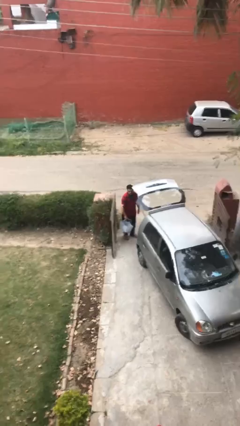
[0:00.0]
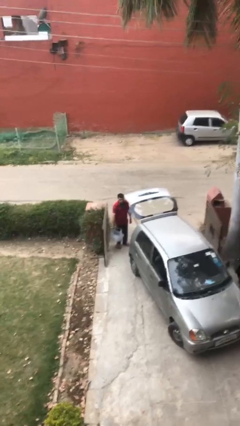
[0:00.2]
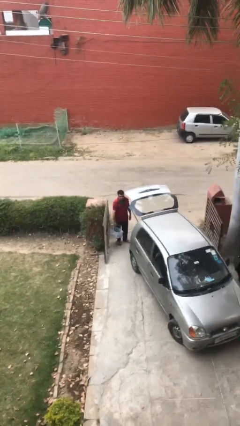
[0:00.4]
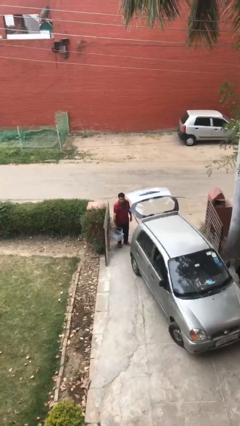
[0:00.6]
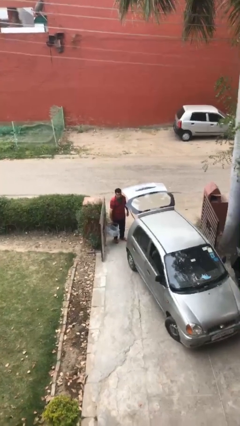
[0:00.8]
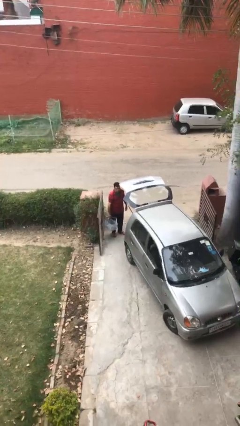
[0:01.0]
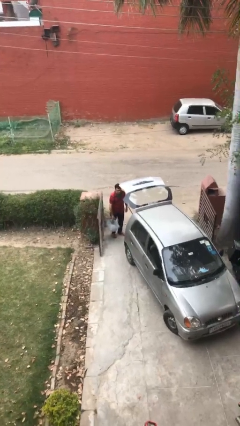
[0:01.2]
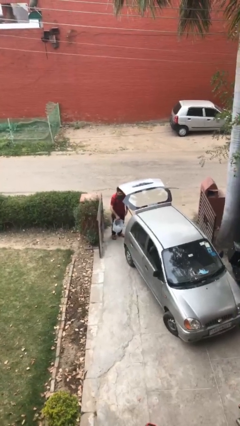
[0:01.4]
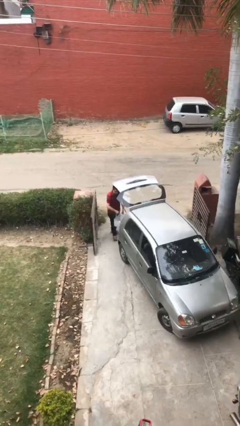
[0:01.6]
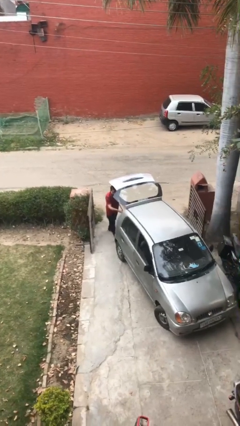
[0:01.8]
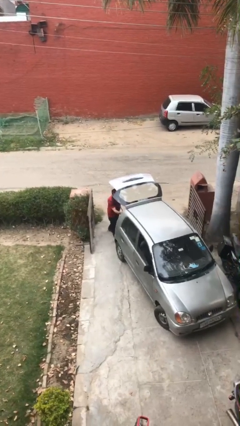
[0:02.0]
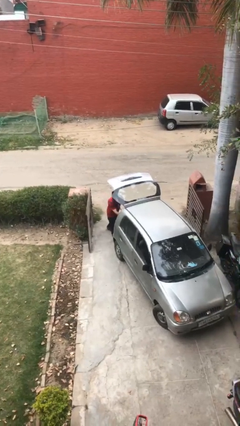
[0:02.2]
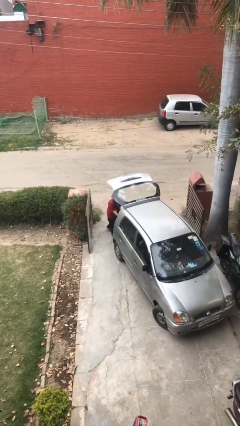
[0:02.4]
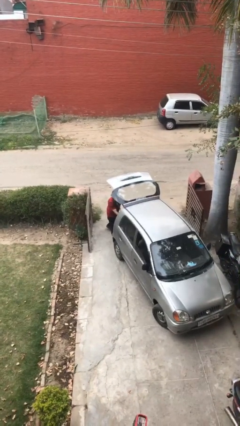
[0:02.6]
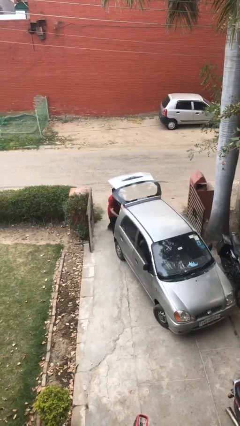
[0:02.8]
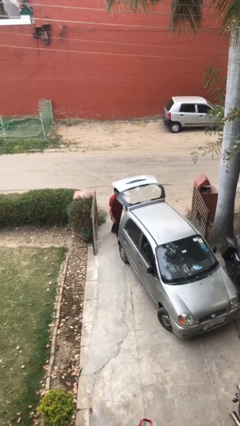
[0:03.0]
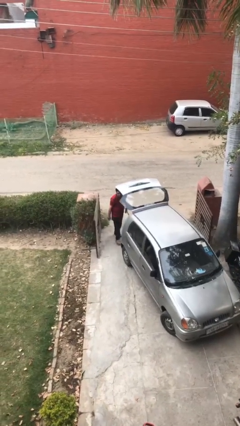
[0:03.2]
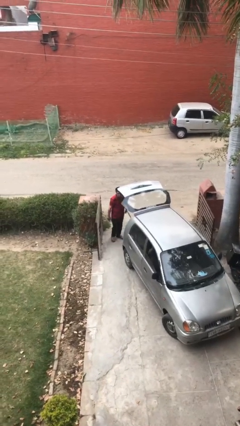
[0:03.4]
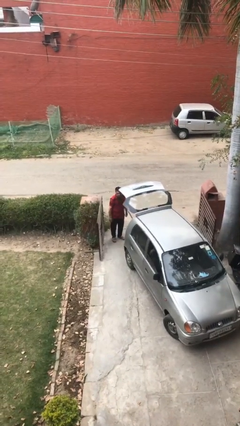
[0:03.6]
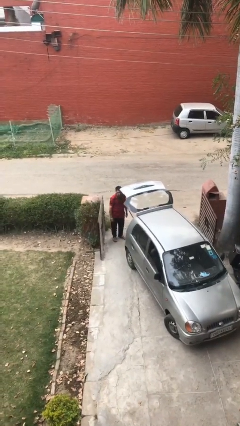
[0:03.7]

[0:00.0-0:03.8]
person loads car

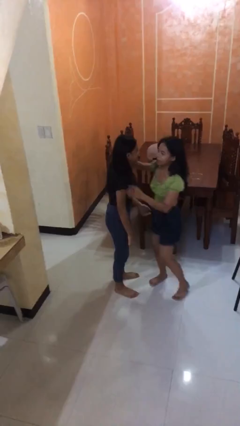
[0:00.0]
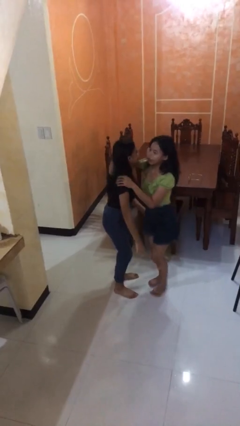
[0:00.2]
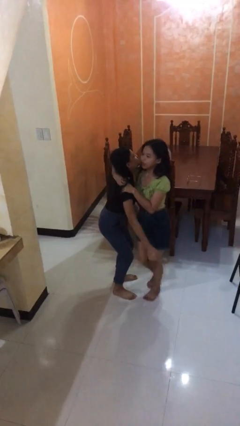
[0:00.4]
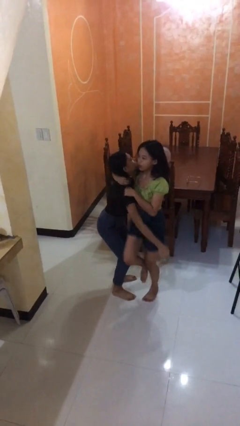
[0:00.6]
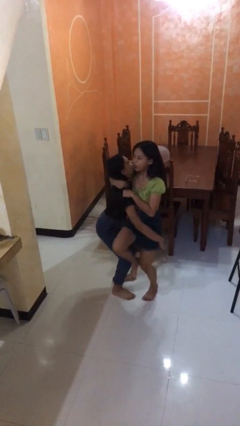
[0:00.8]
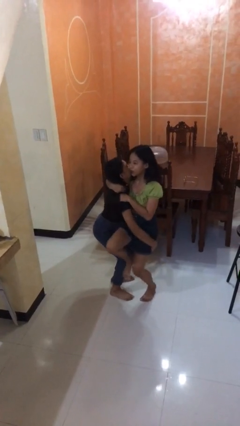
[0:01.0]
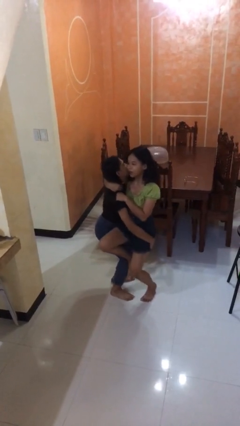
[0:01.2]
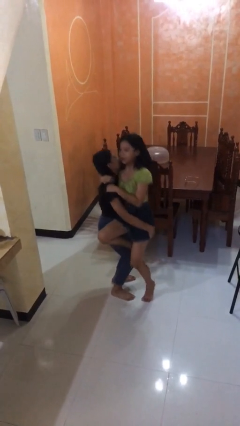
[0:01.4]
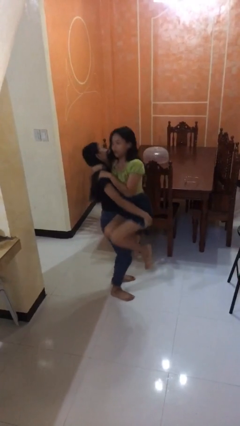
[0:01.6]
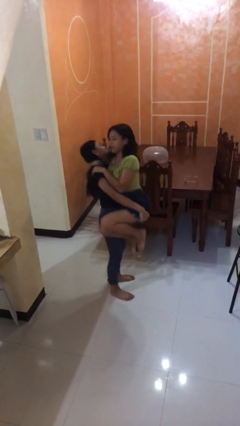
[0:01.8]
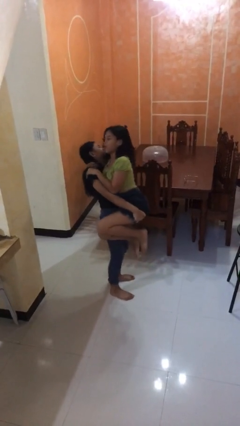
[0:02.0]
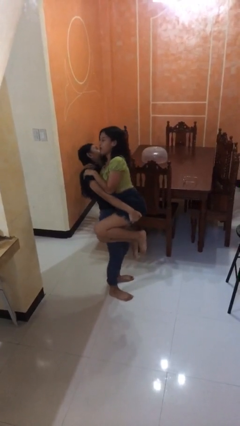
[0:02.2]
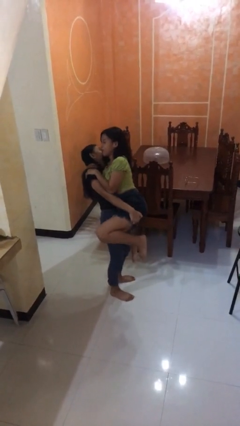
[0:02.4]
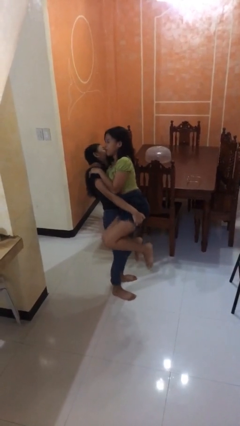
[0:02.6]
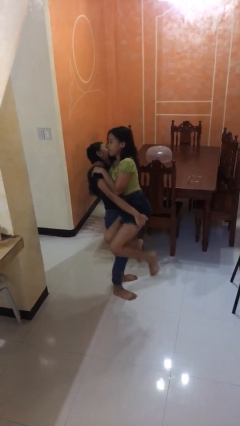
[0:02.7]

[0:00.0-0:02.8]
person picks up person

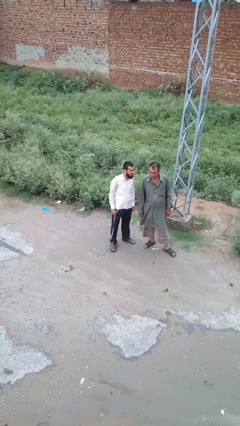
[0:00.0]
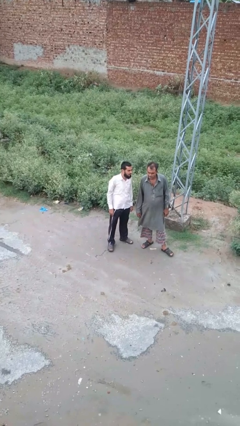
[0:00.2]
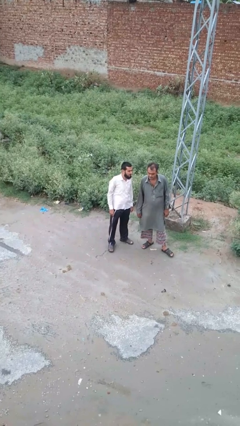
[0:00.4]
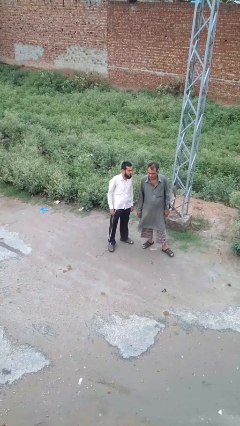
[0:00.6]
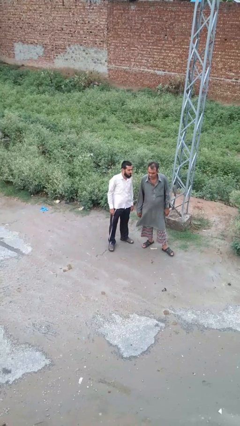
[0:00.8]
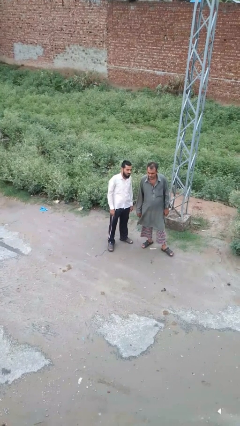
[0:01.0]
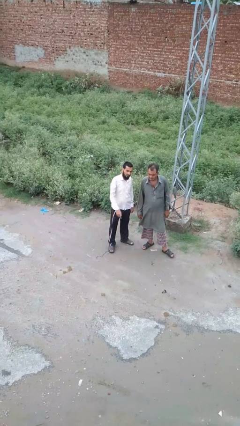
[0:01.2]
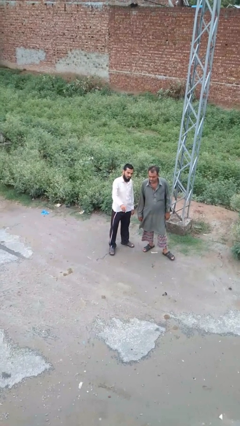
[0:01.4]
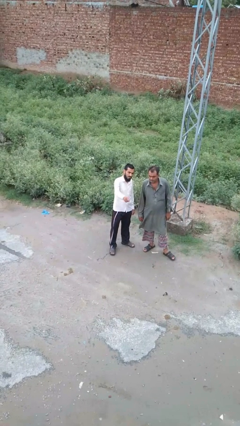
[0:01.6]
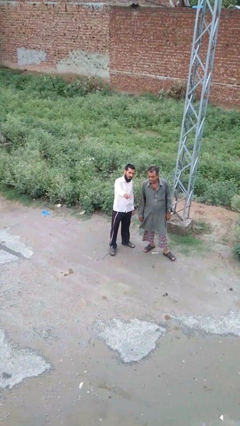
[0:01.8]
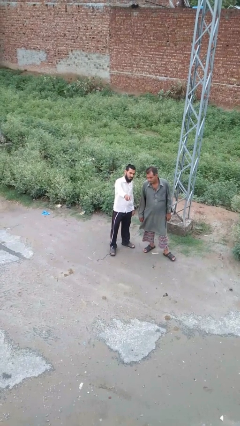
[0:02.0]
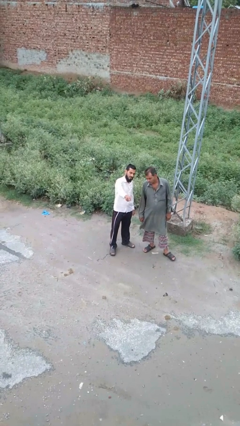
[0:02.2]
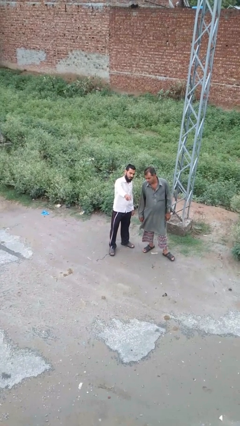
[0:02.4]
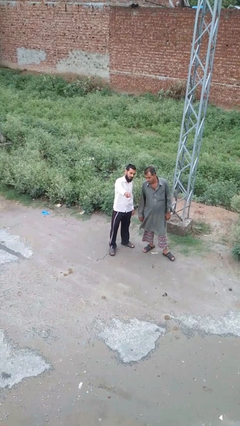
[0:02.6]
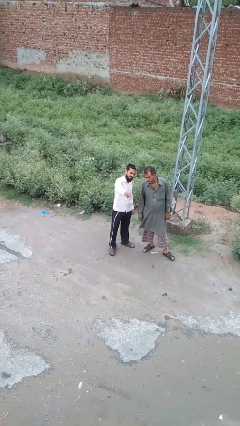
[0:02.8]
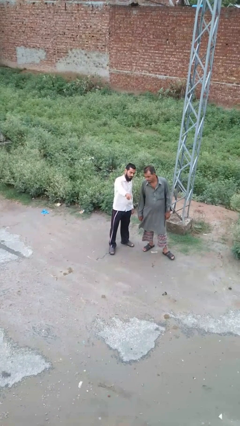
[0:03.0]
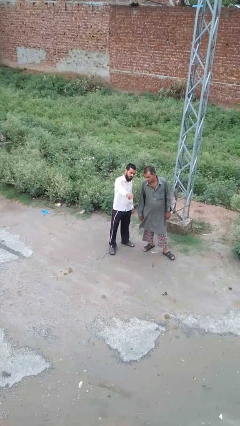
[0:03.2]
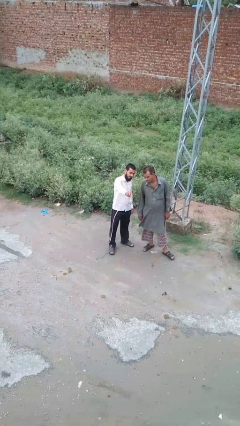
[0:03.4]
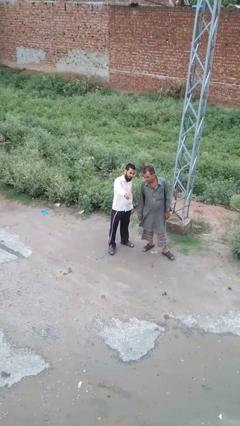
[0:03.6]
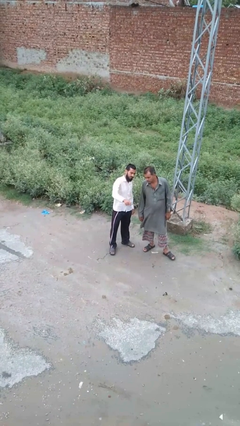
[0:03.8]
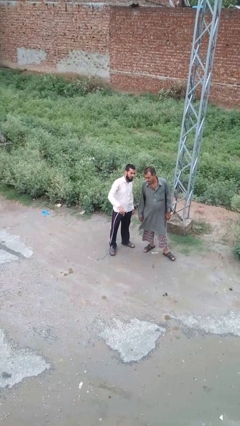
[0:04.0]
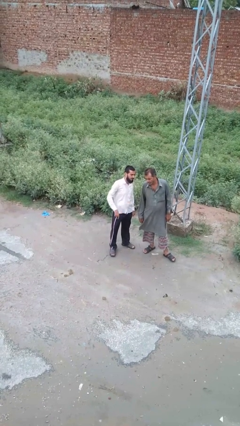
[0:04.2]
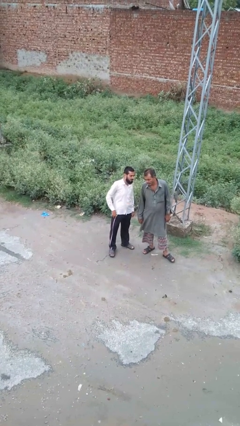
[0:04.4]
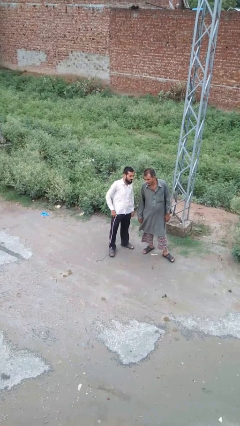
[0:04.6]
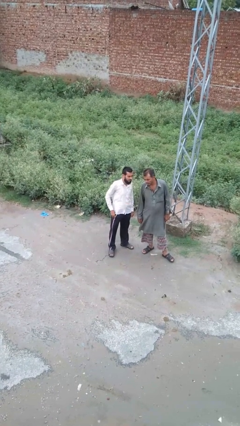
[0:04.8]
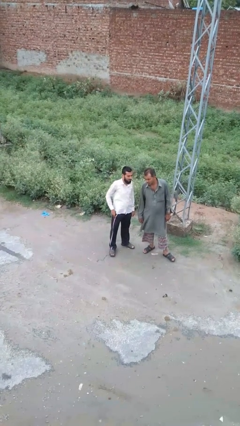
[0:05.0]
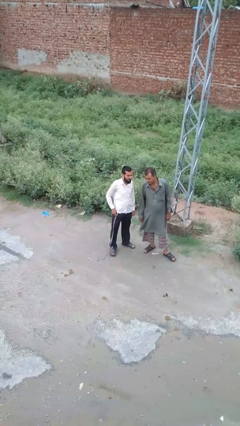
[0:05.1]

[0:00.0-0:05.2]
person points at person

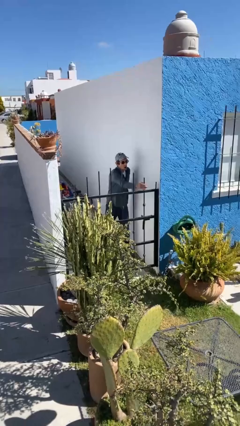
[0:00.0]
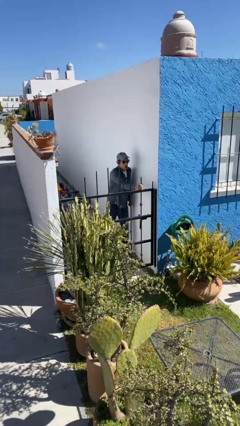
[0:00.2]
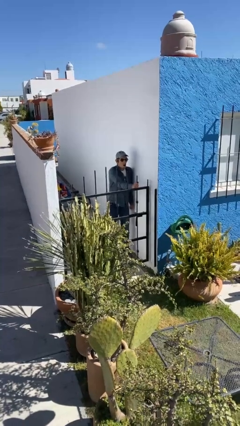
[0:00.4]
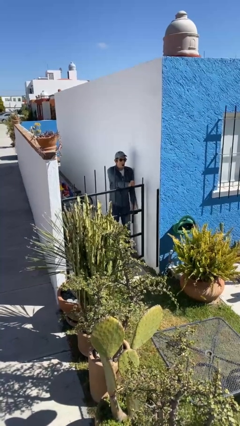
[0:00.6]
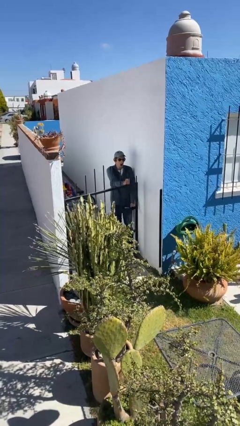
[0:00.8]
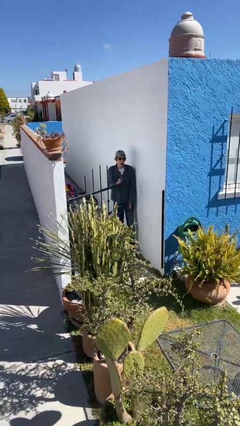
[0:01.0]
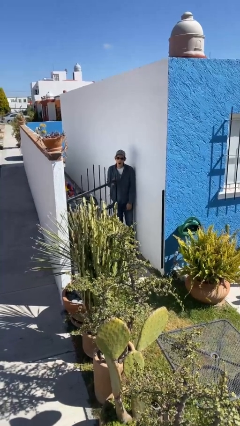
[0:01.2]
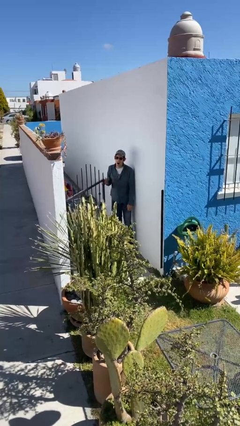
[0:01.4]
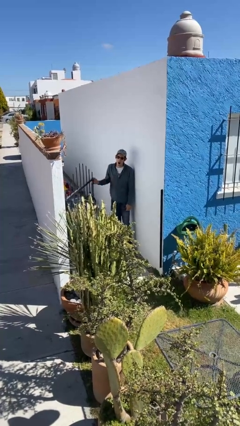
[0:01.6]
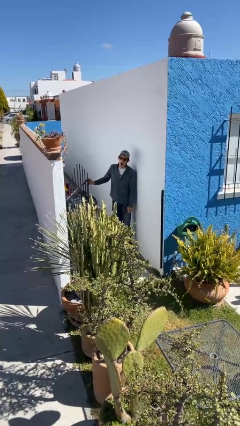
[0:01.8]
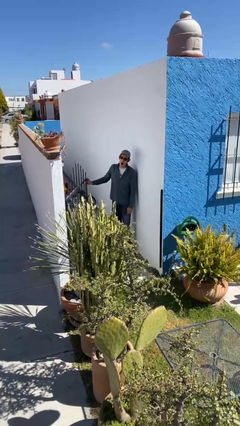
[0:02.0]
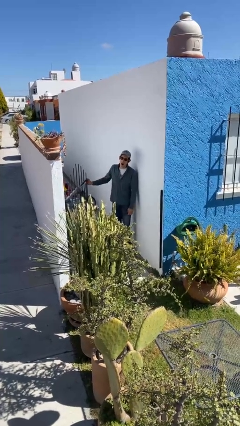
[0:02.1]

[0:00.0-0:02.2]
person opens facility door

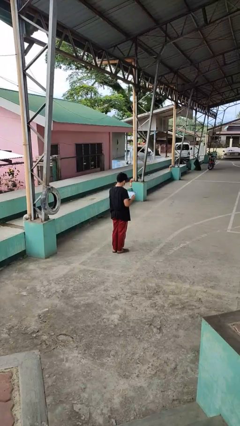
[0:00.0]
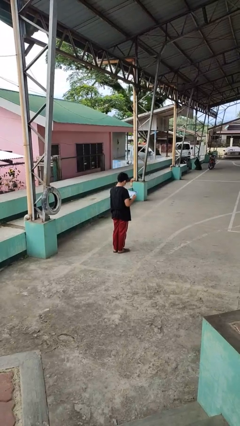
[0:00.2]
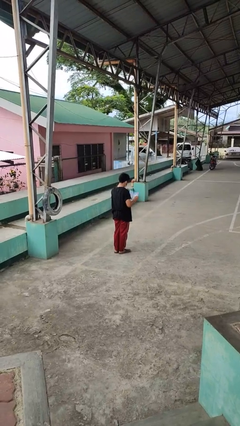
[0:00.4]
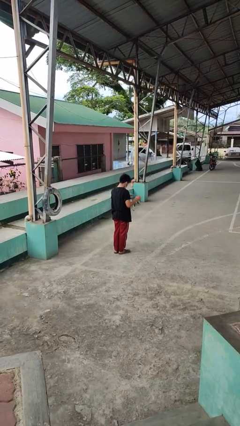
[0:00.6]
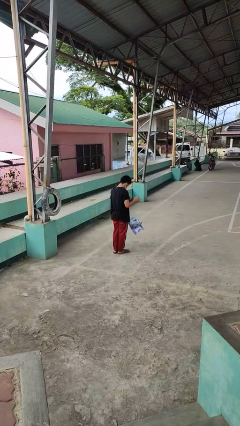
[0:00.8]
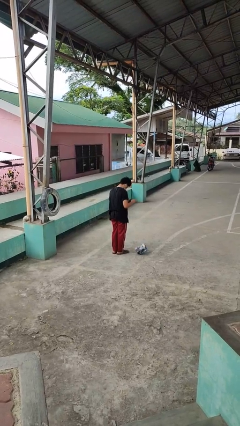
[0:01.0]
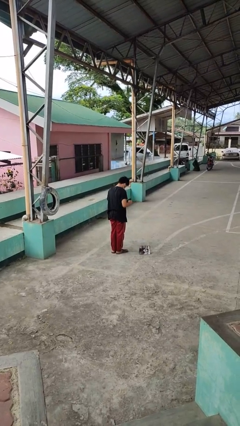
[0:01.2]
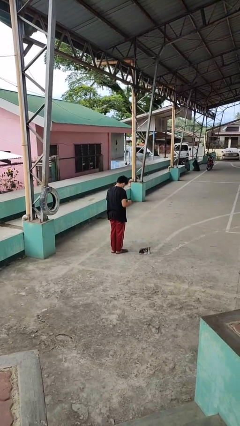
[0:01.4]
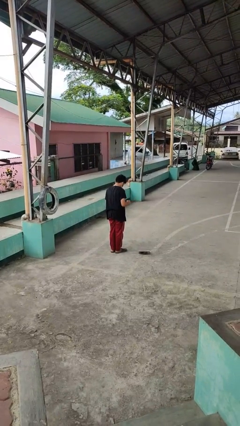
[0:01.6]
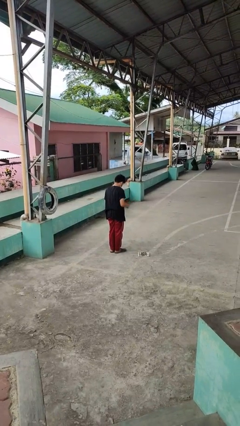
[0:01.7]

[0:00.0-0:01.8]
person drops object

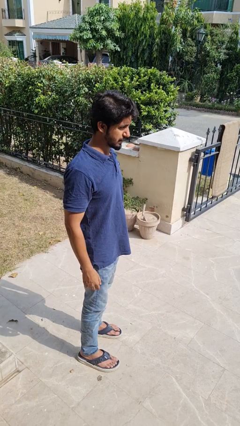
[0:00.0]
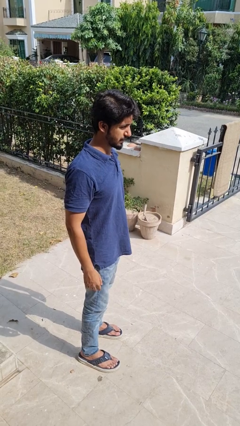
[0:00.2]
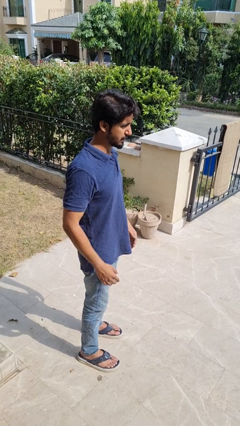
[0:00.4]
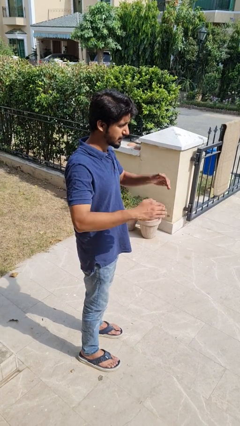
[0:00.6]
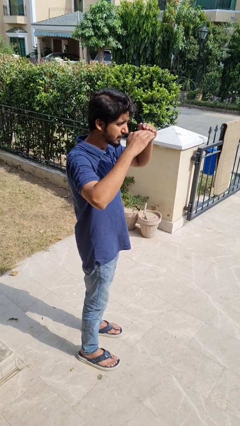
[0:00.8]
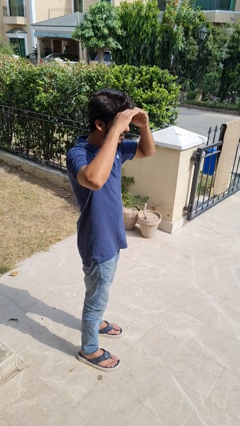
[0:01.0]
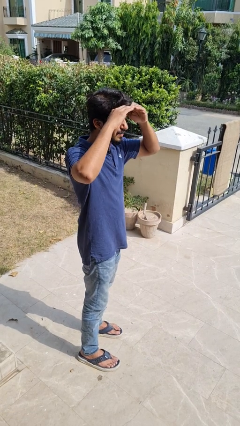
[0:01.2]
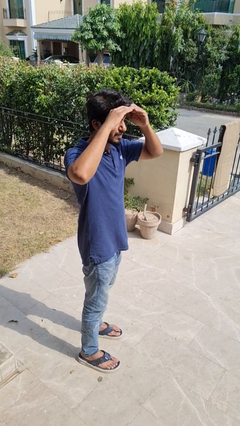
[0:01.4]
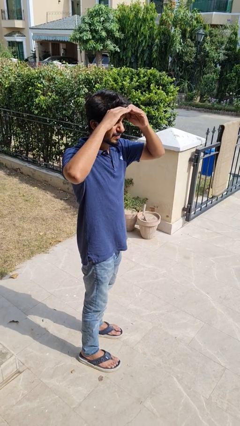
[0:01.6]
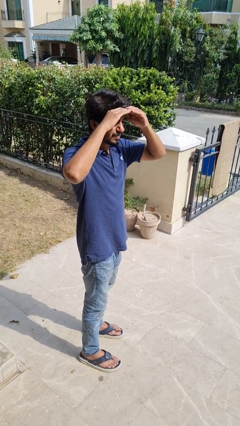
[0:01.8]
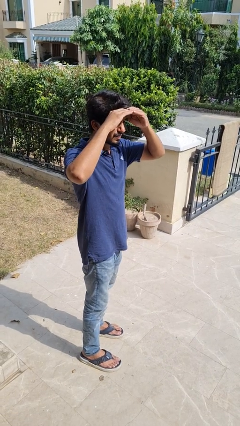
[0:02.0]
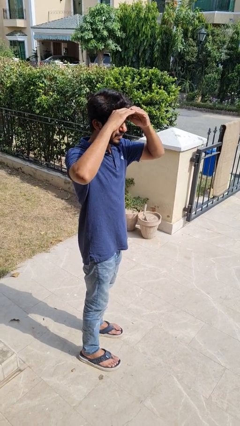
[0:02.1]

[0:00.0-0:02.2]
person shades eyes
